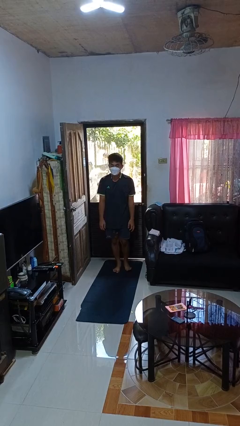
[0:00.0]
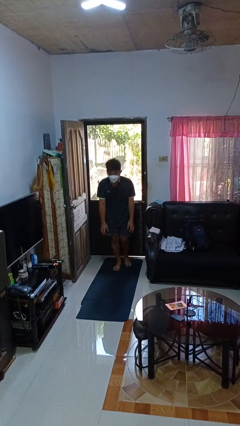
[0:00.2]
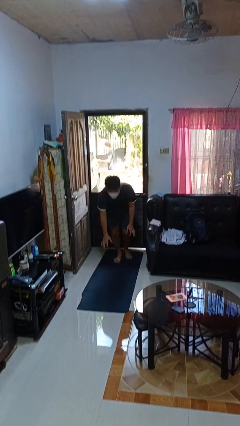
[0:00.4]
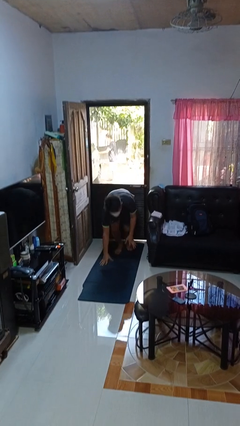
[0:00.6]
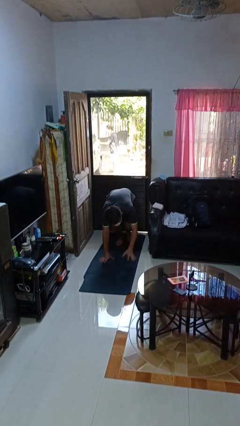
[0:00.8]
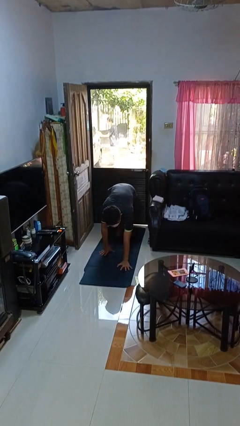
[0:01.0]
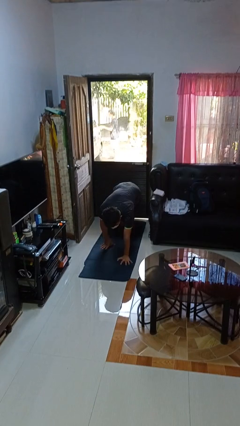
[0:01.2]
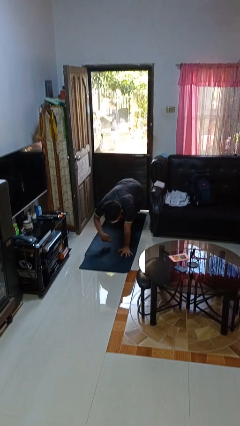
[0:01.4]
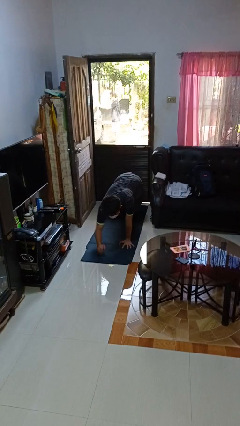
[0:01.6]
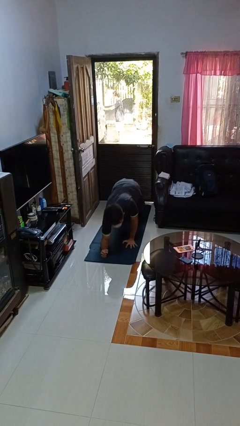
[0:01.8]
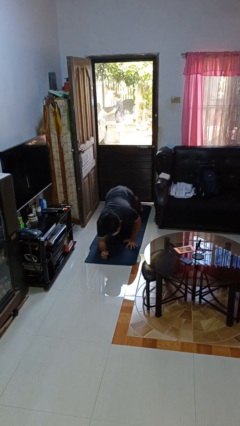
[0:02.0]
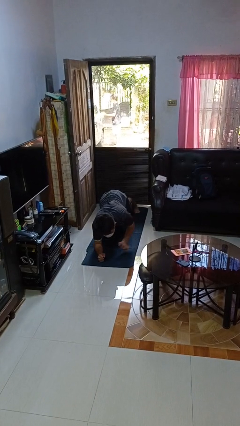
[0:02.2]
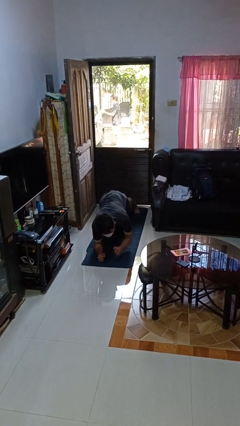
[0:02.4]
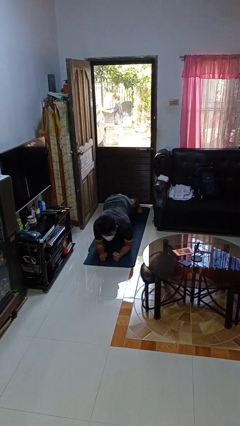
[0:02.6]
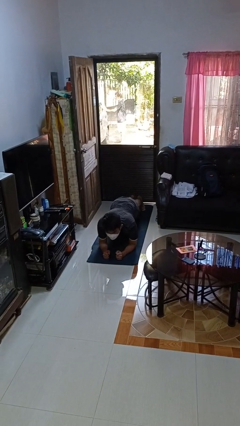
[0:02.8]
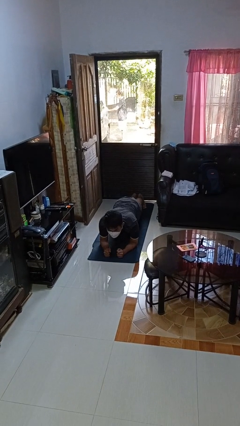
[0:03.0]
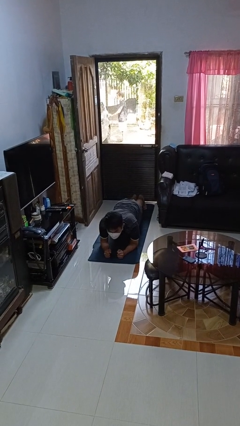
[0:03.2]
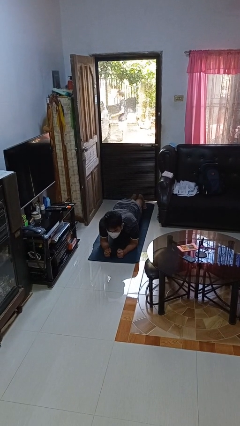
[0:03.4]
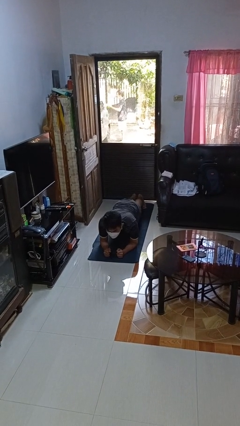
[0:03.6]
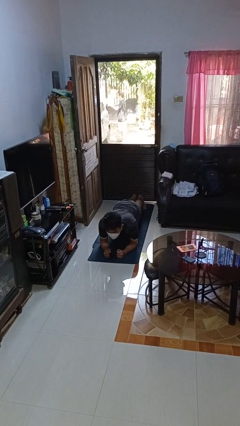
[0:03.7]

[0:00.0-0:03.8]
person exercises with plank

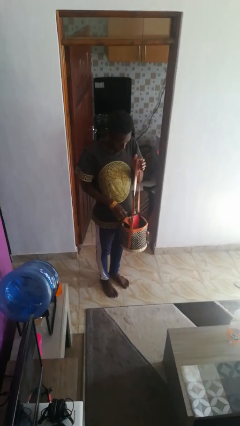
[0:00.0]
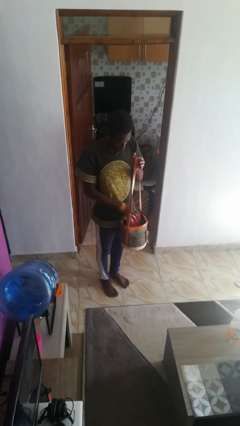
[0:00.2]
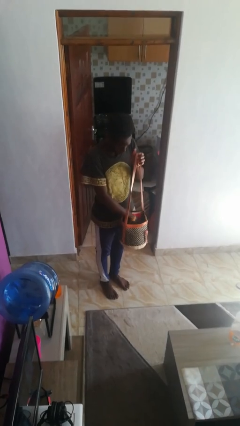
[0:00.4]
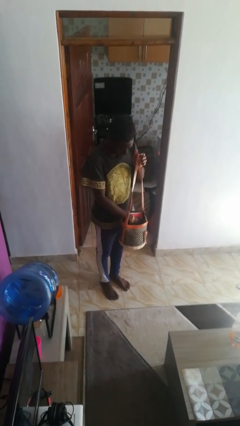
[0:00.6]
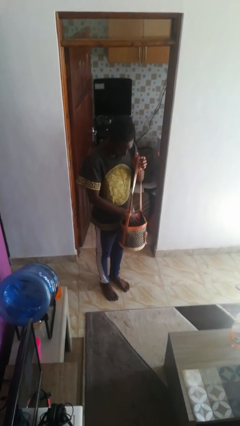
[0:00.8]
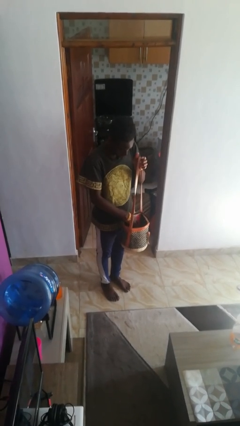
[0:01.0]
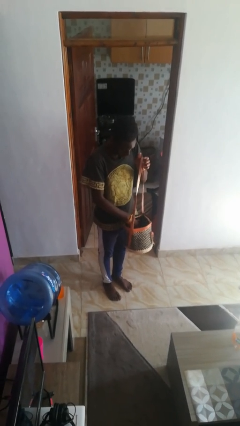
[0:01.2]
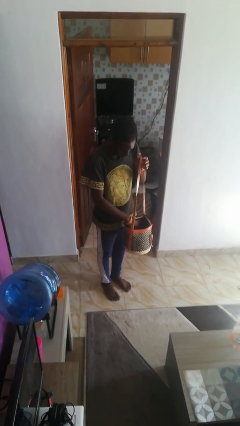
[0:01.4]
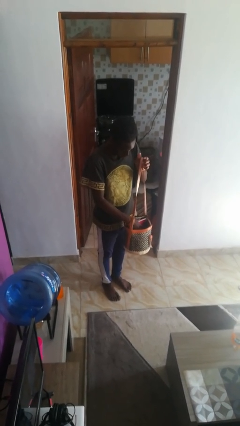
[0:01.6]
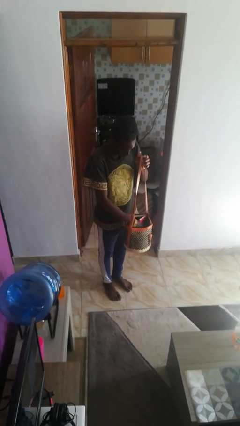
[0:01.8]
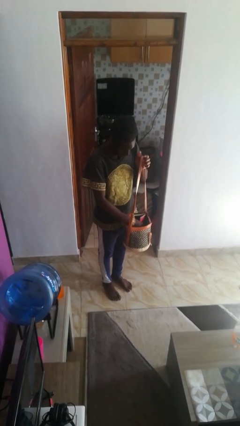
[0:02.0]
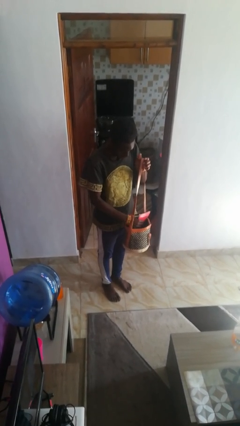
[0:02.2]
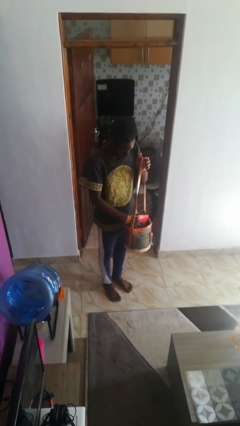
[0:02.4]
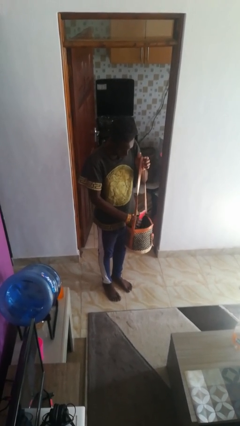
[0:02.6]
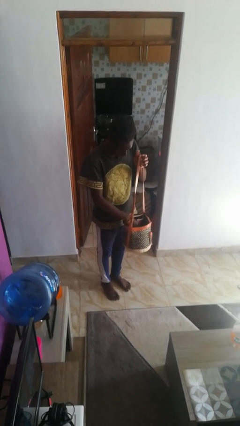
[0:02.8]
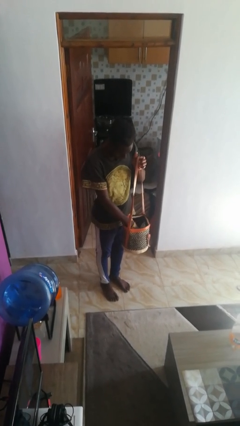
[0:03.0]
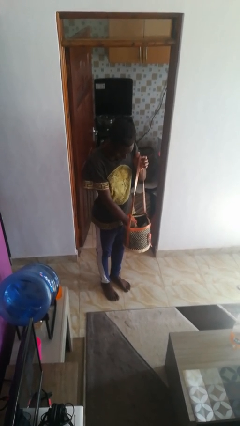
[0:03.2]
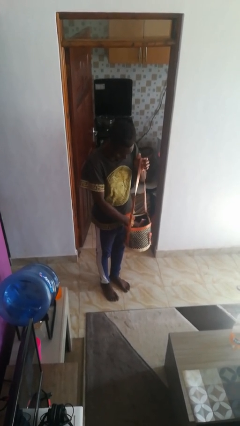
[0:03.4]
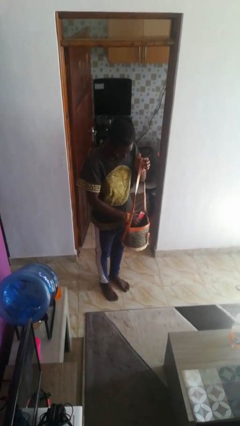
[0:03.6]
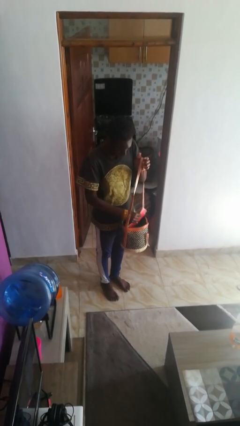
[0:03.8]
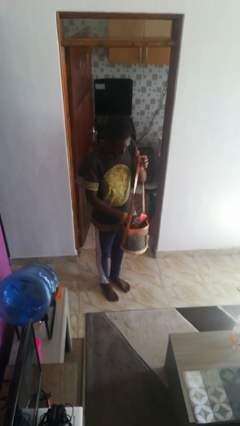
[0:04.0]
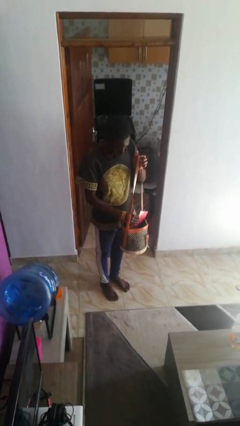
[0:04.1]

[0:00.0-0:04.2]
person searches in purse

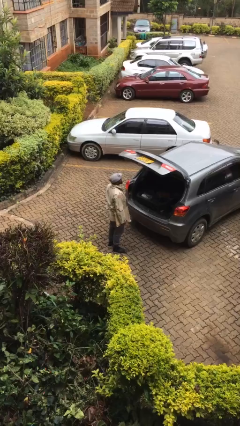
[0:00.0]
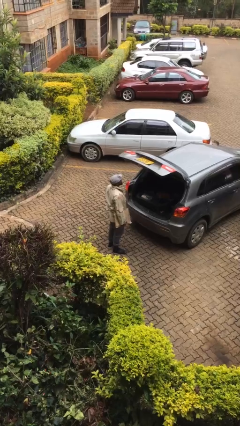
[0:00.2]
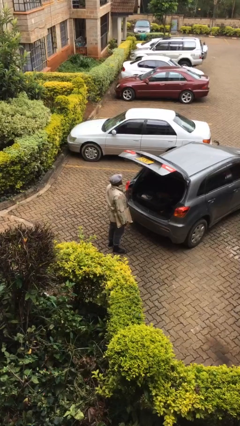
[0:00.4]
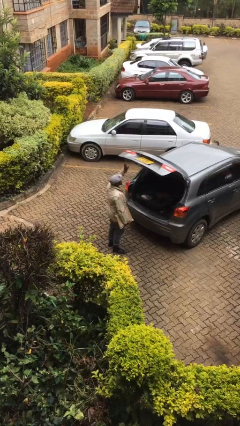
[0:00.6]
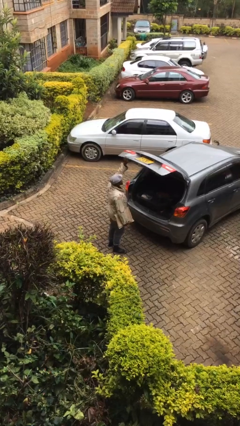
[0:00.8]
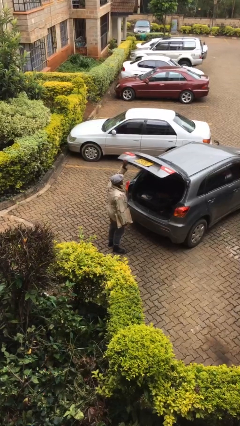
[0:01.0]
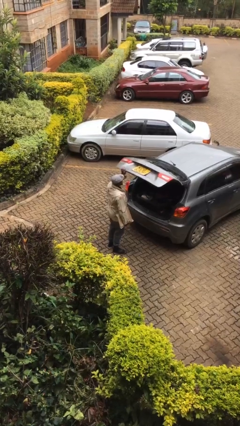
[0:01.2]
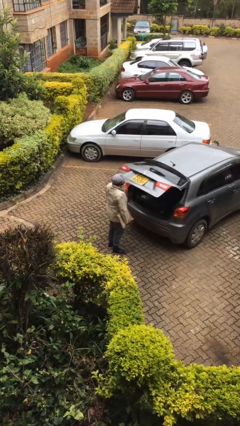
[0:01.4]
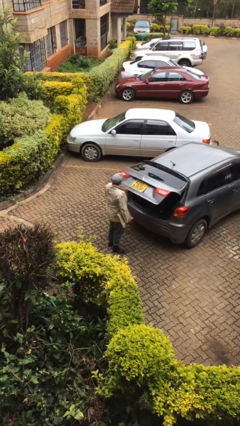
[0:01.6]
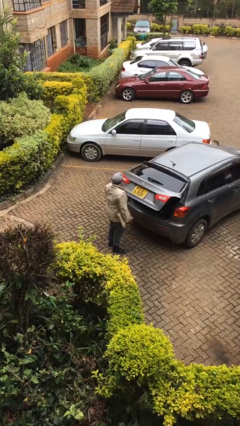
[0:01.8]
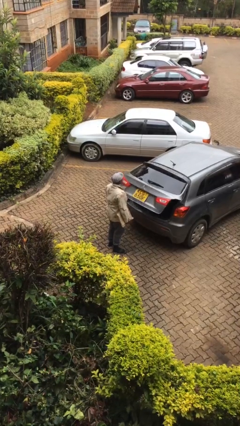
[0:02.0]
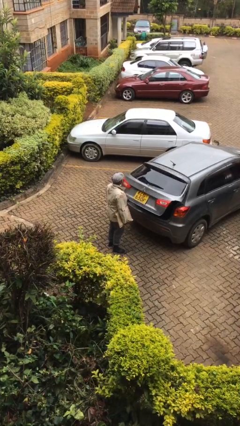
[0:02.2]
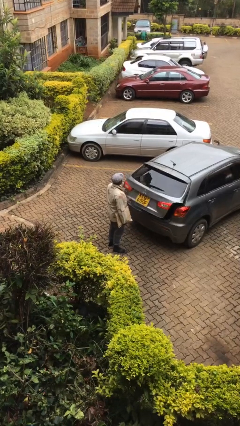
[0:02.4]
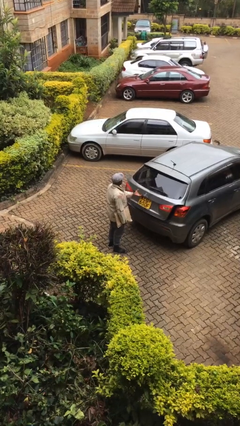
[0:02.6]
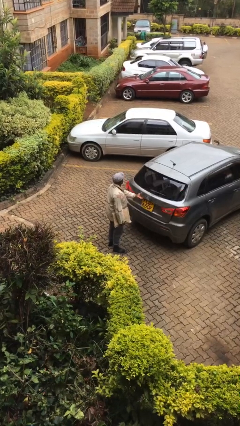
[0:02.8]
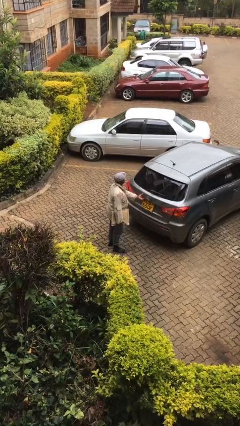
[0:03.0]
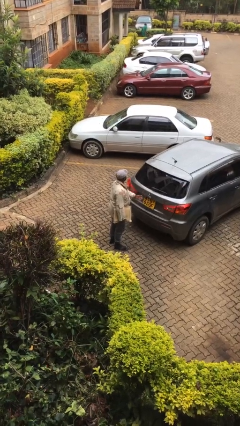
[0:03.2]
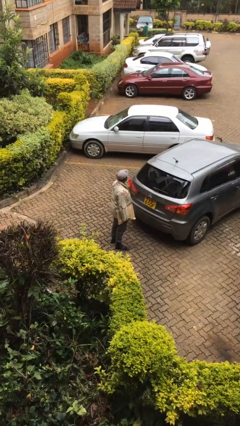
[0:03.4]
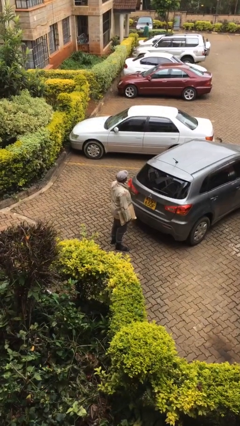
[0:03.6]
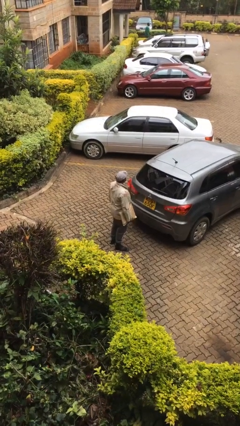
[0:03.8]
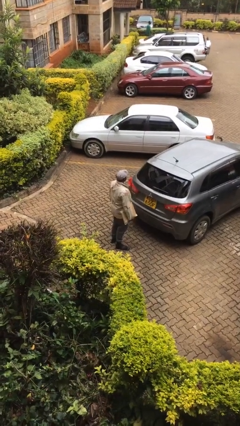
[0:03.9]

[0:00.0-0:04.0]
person closes car trunk

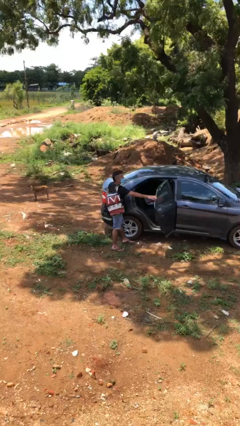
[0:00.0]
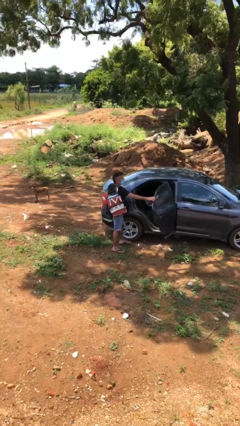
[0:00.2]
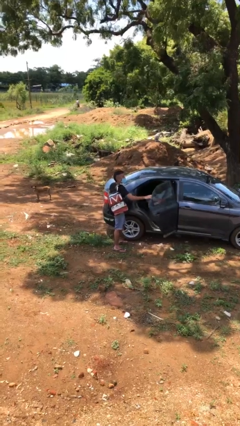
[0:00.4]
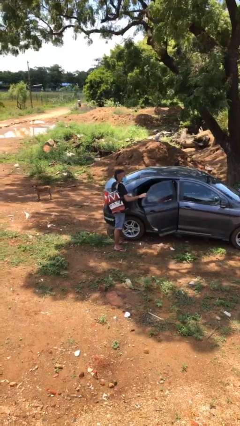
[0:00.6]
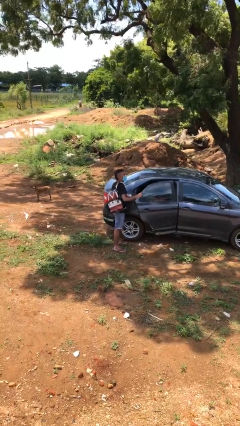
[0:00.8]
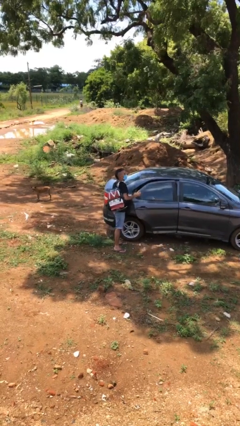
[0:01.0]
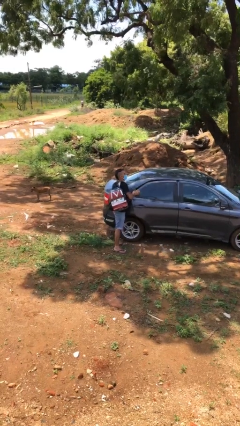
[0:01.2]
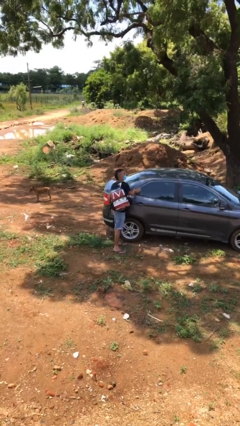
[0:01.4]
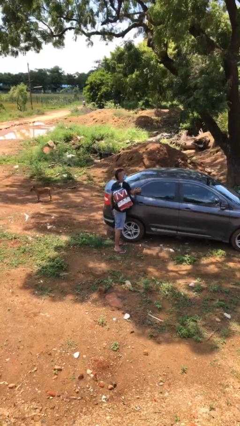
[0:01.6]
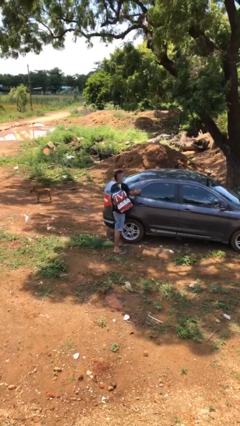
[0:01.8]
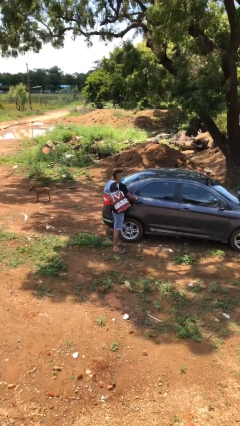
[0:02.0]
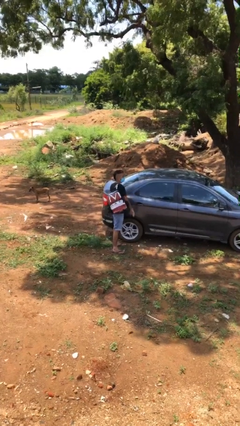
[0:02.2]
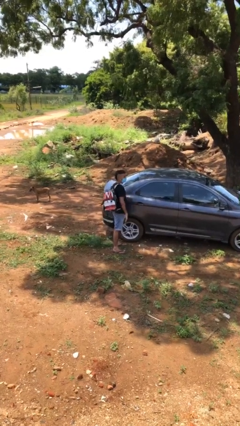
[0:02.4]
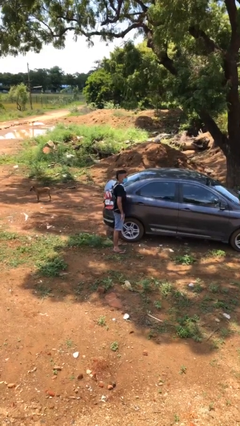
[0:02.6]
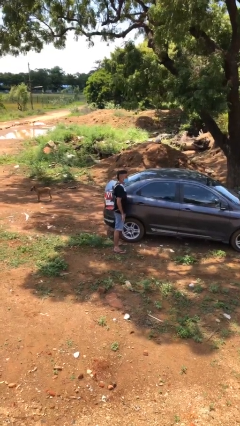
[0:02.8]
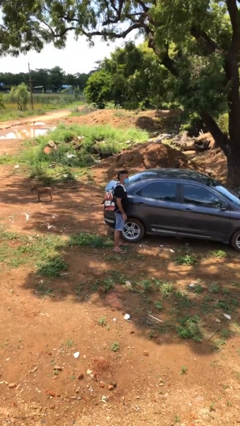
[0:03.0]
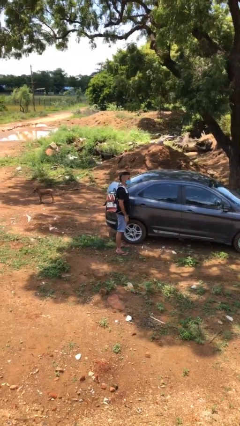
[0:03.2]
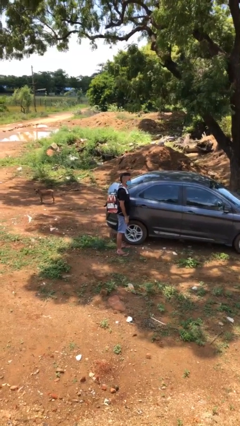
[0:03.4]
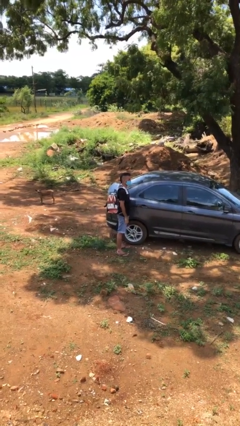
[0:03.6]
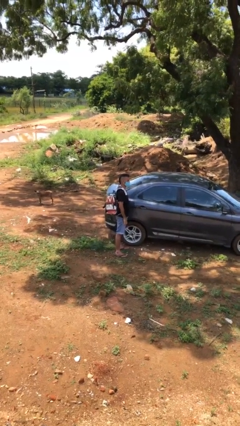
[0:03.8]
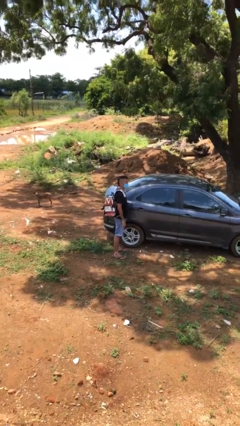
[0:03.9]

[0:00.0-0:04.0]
person closes car door

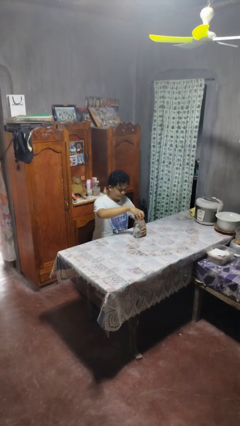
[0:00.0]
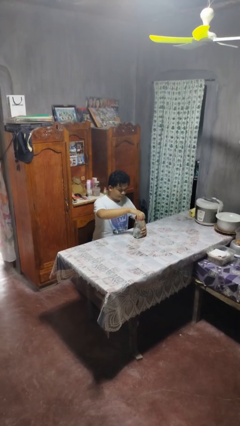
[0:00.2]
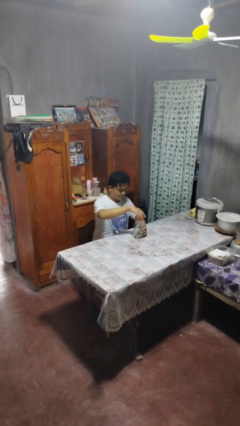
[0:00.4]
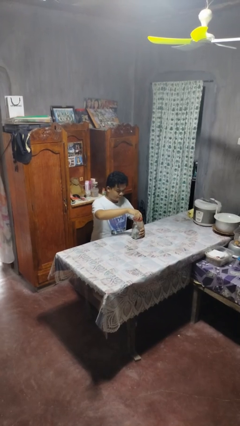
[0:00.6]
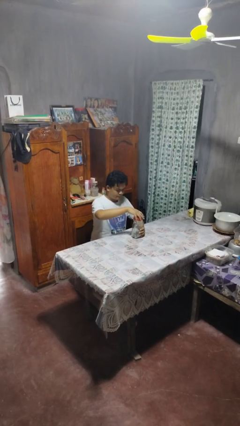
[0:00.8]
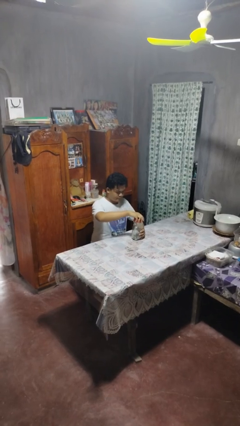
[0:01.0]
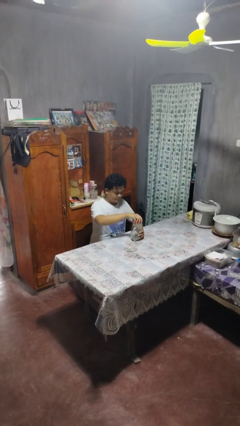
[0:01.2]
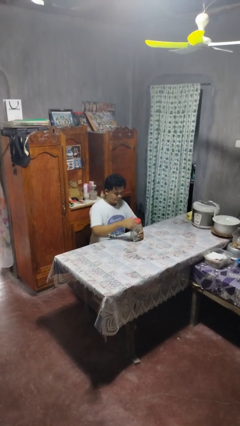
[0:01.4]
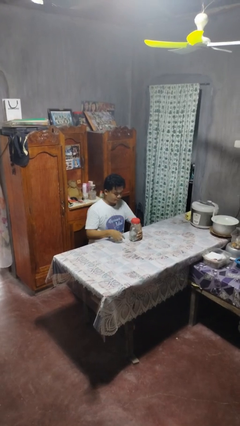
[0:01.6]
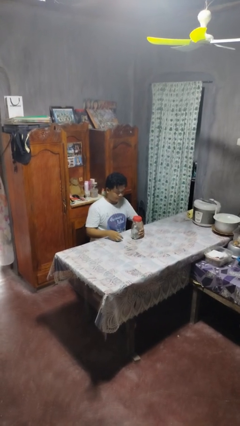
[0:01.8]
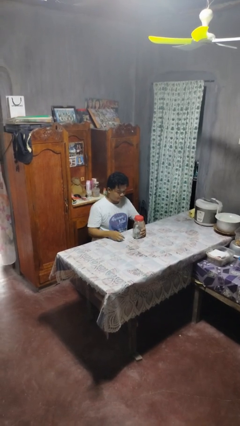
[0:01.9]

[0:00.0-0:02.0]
person closes jar
